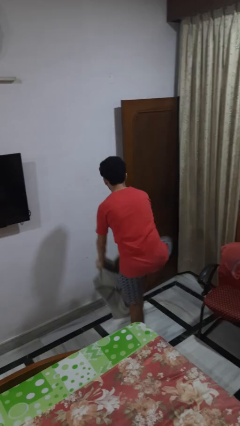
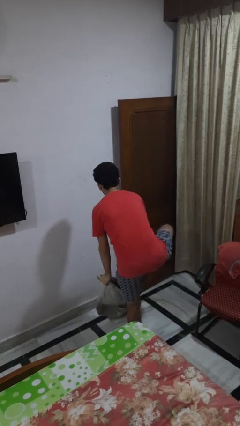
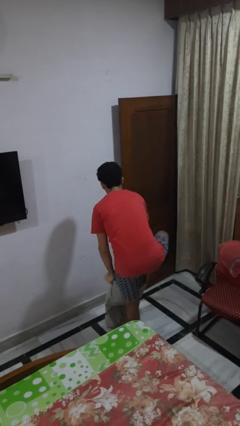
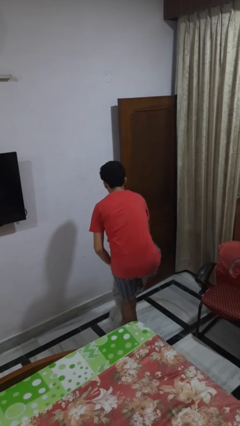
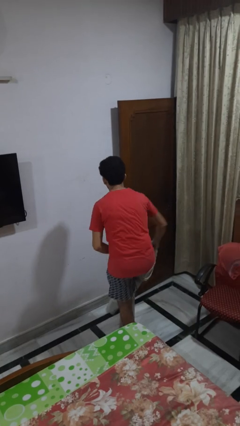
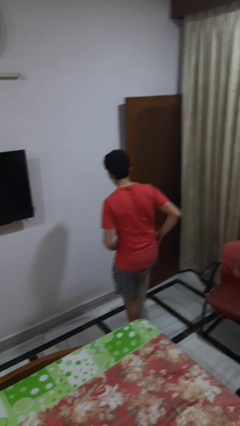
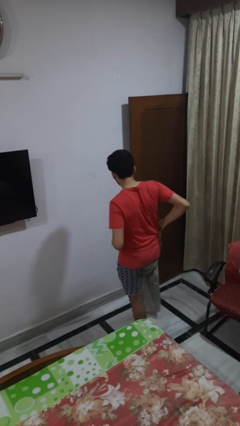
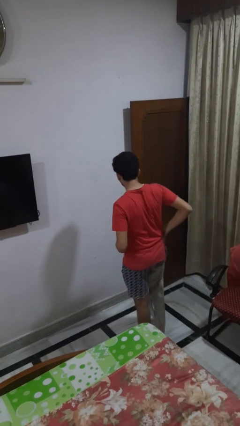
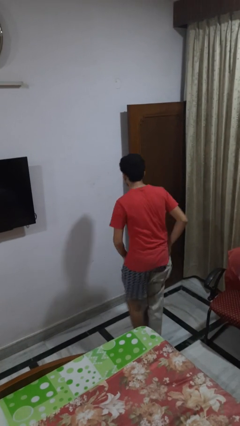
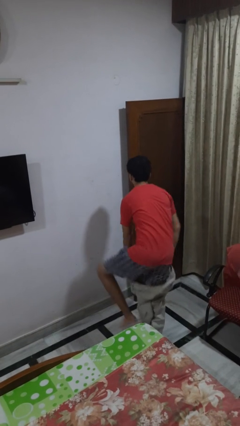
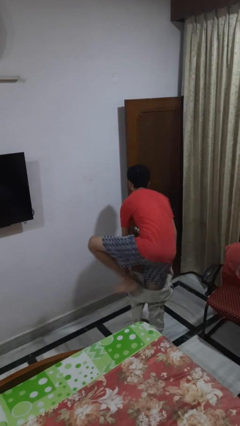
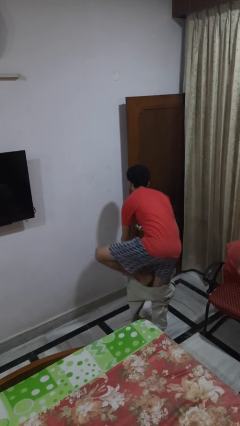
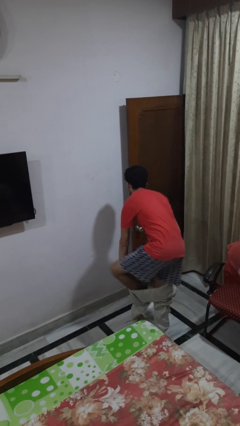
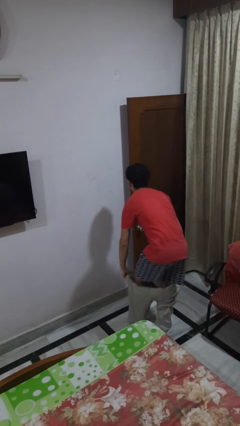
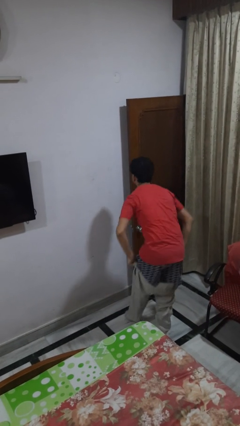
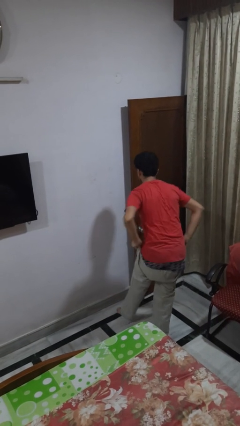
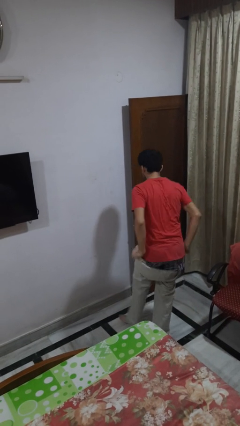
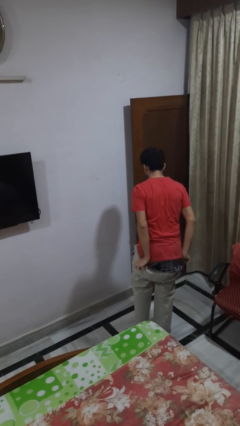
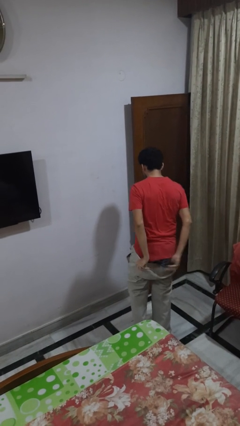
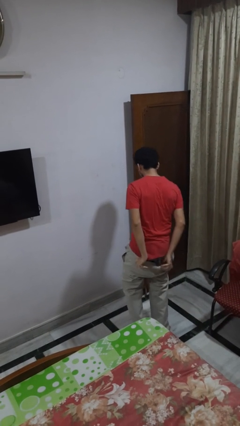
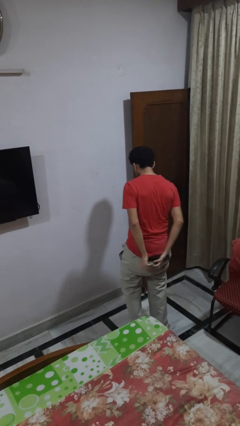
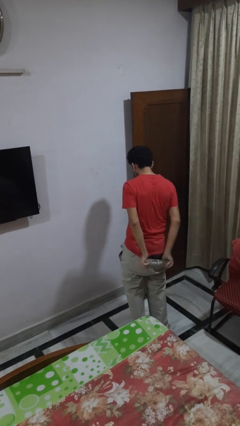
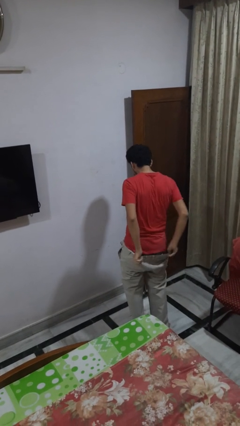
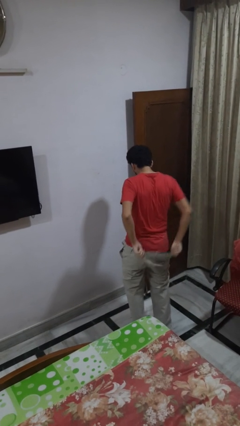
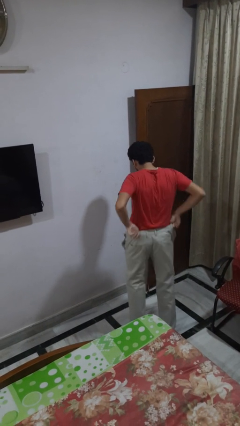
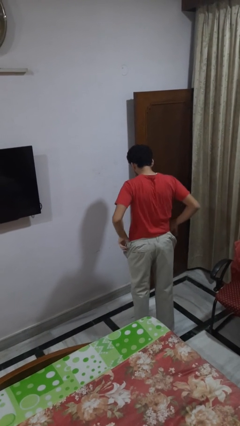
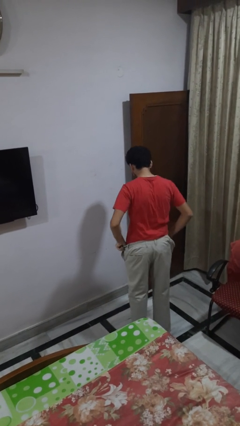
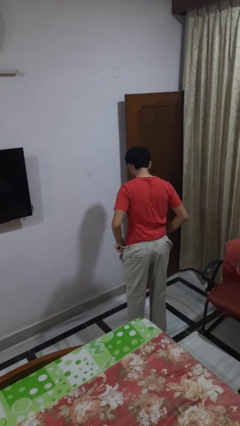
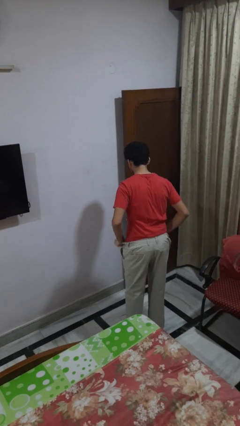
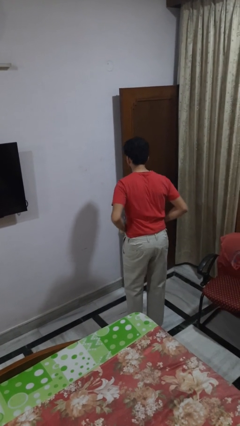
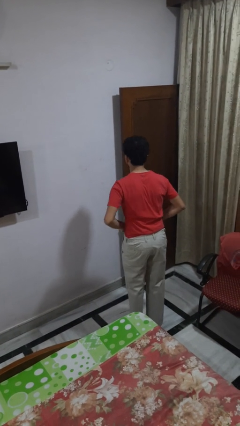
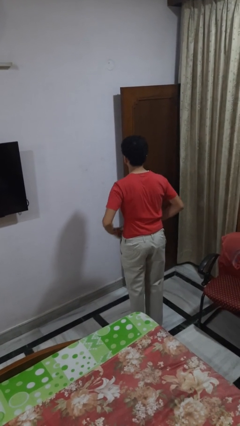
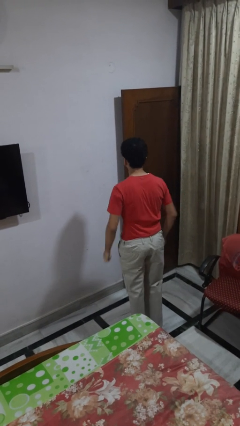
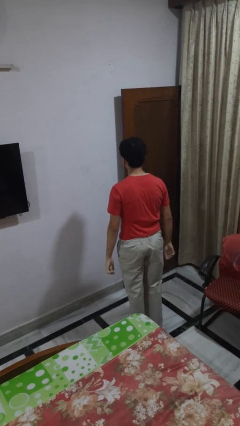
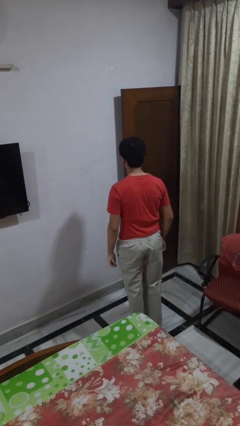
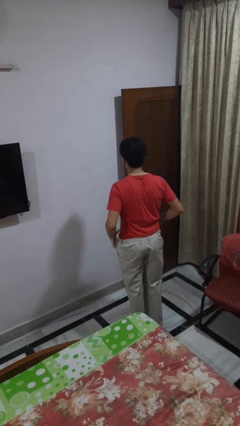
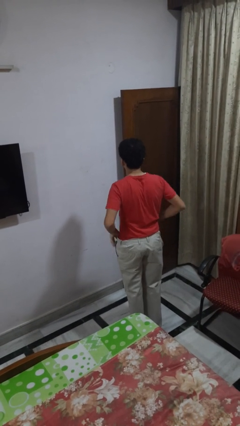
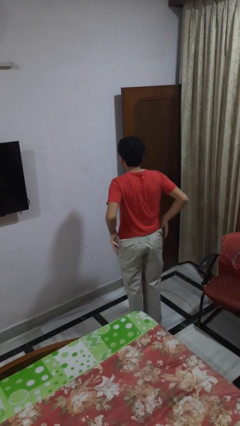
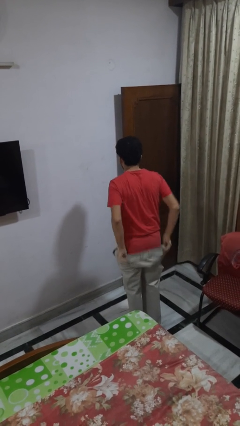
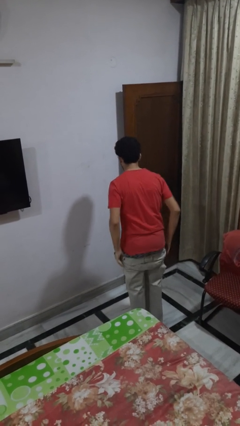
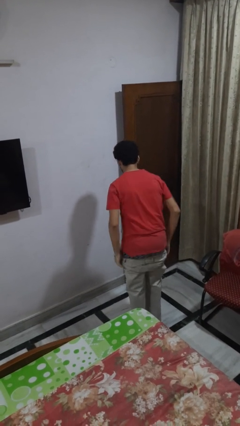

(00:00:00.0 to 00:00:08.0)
person puts on pants

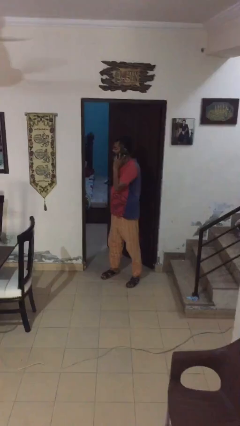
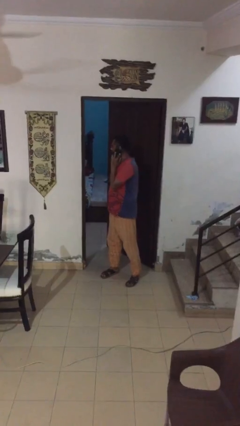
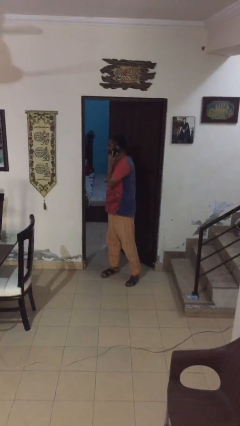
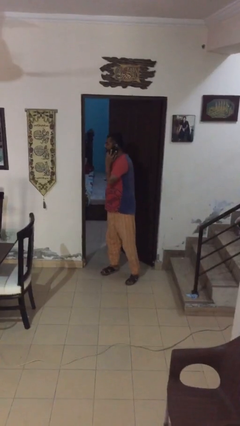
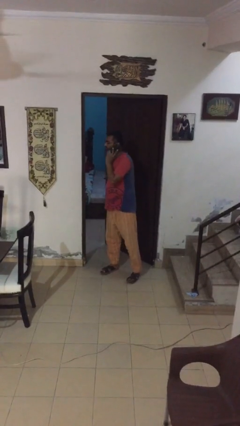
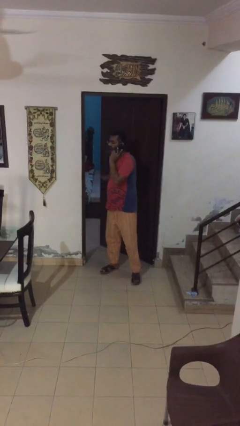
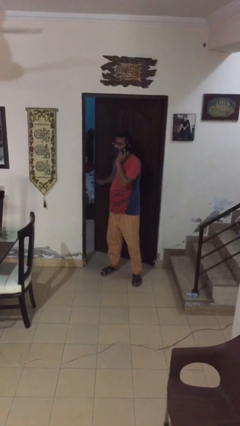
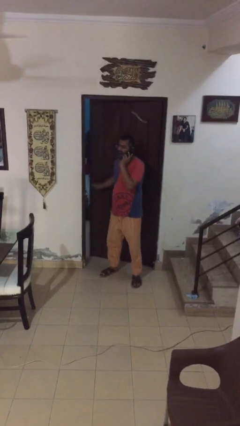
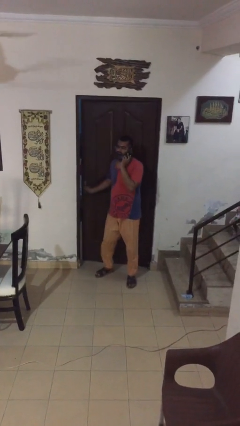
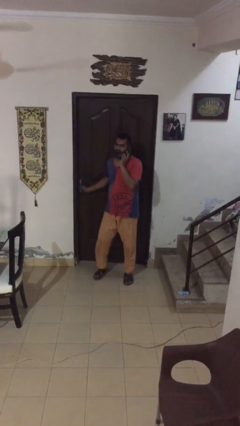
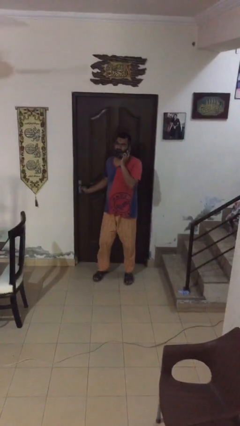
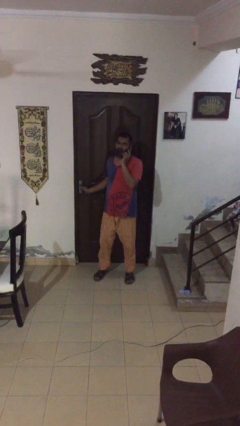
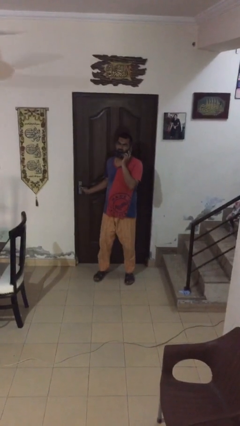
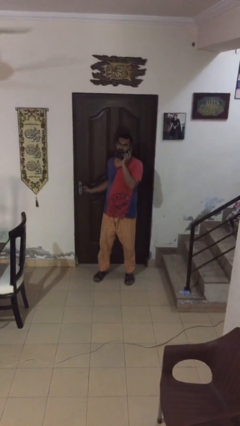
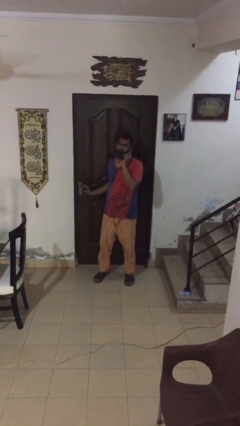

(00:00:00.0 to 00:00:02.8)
person closes facility door

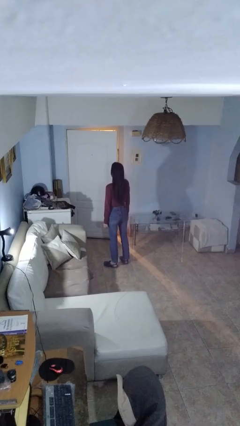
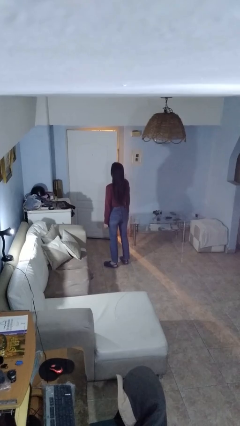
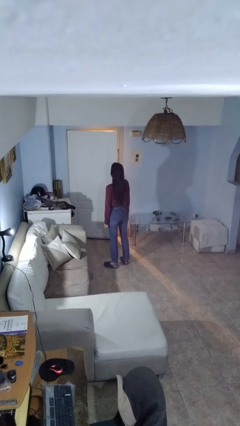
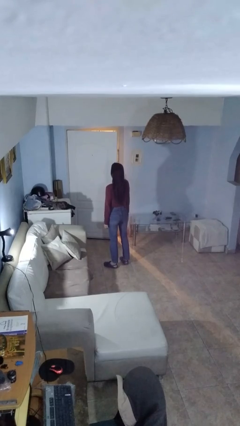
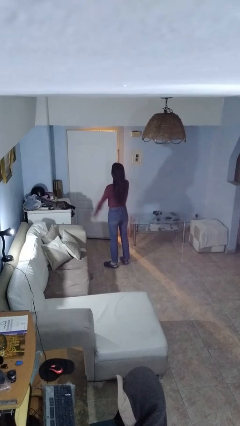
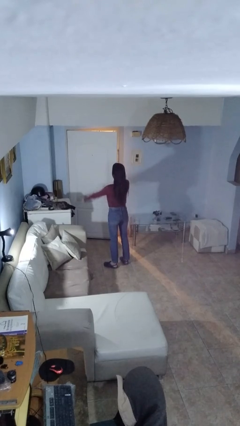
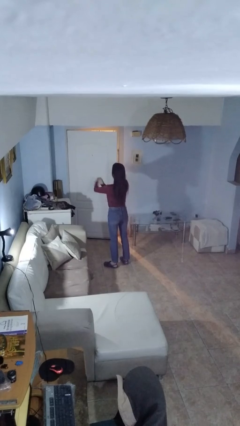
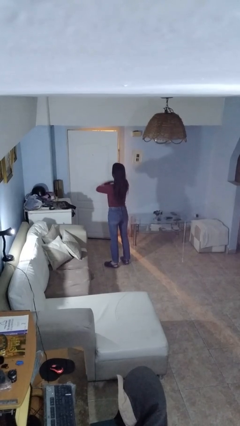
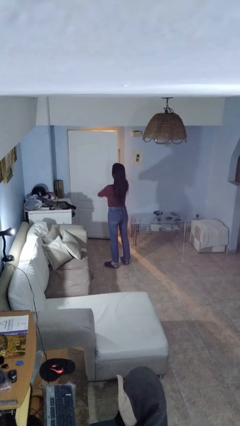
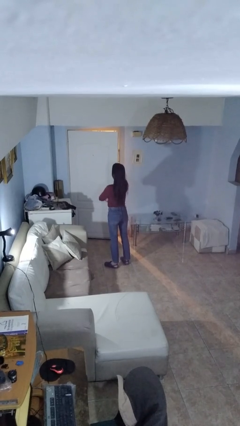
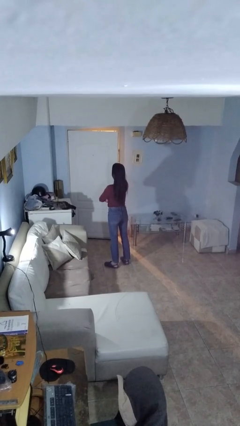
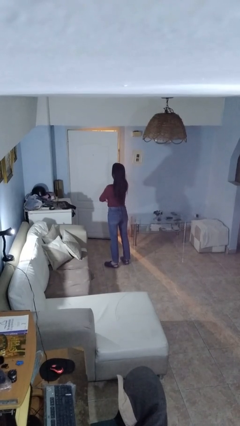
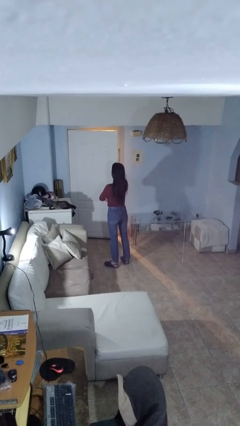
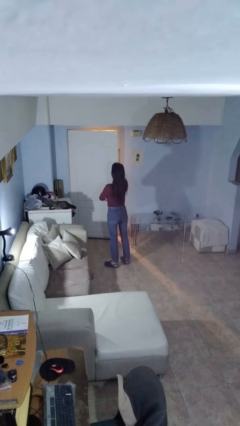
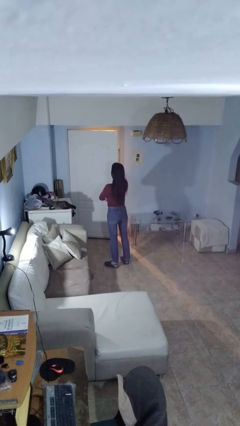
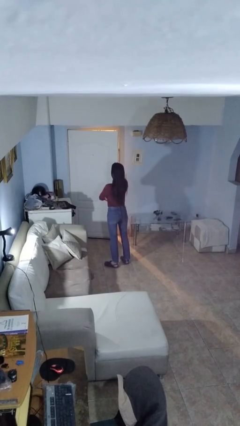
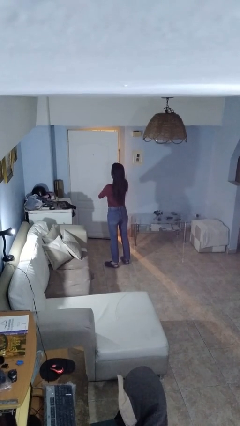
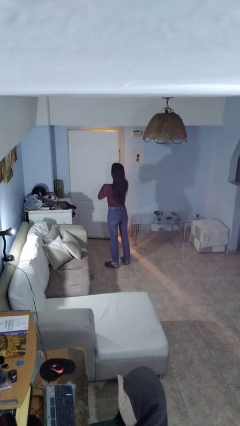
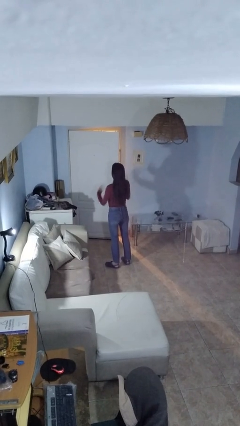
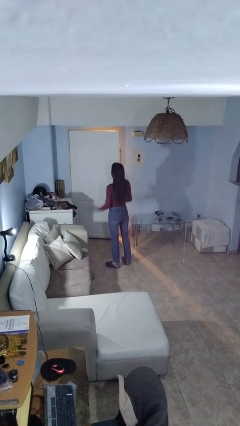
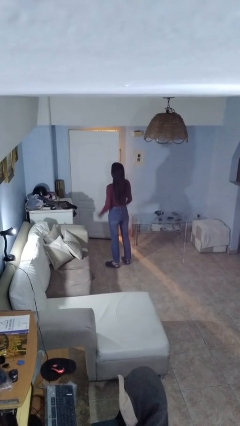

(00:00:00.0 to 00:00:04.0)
person crosses arms

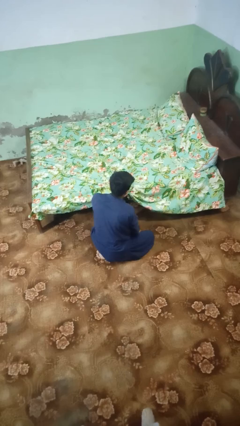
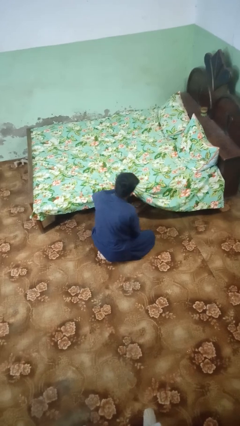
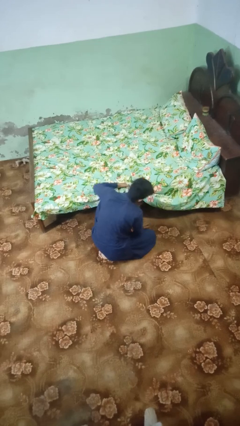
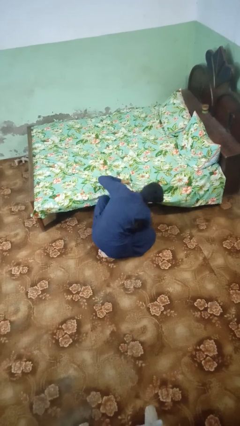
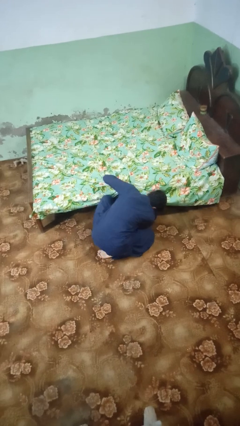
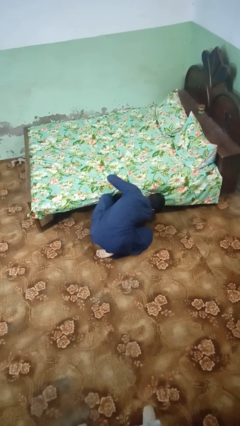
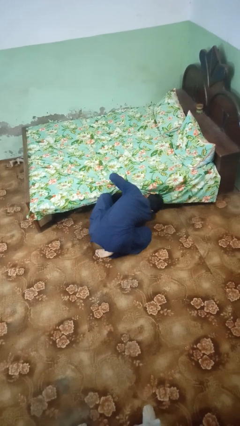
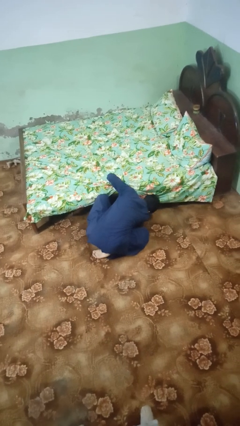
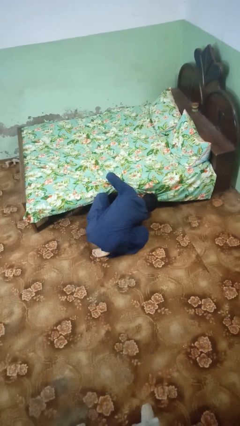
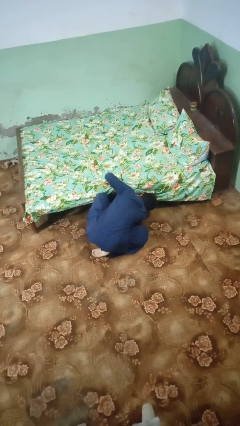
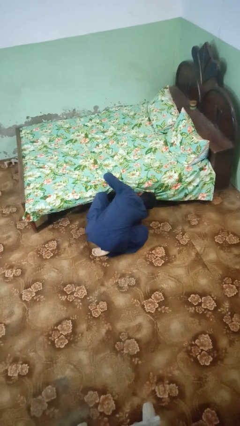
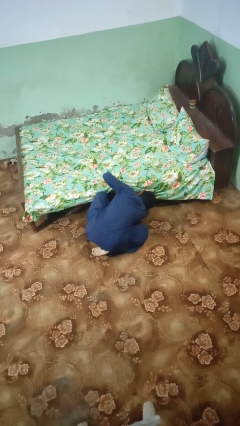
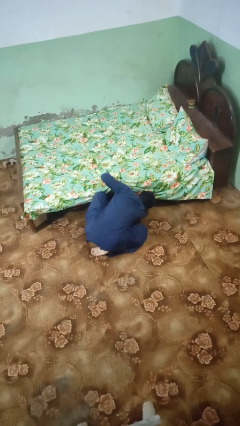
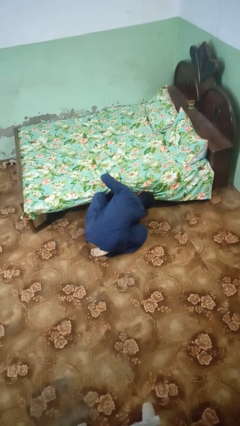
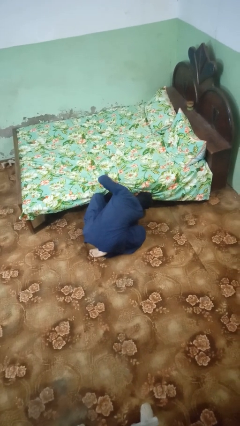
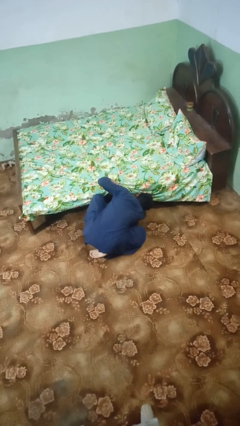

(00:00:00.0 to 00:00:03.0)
person searches under bed
